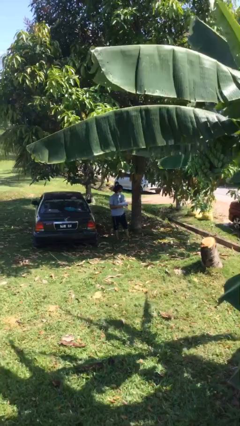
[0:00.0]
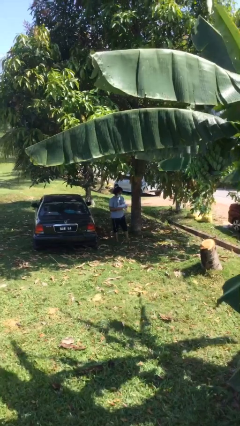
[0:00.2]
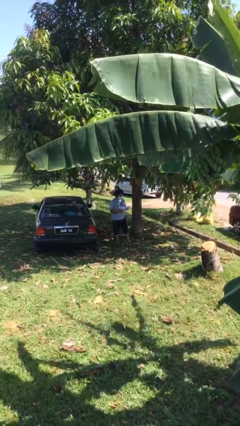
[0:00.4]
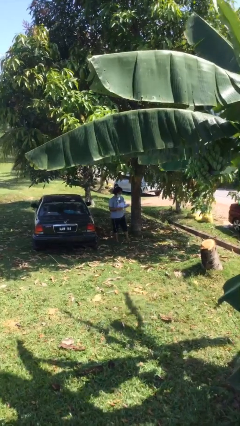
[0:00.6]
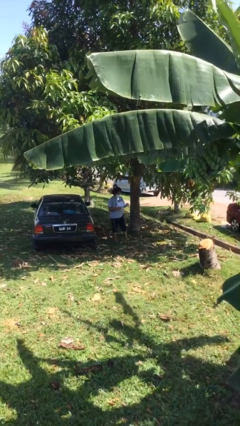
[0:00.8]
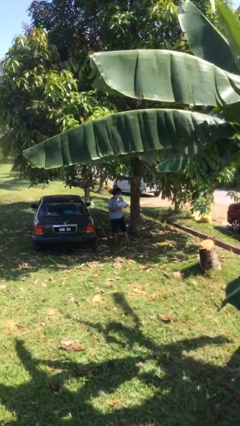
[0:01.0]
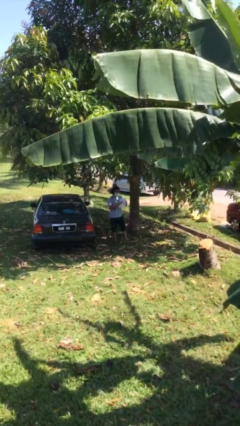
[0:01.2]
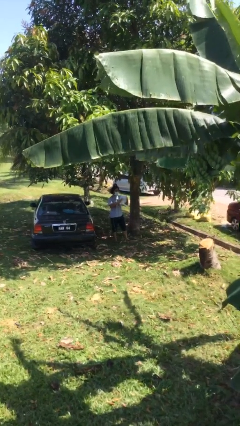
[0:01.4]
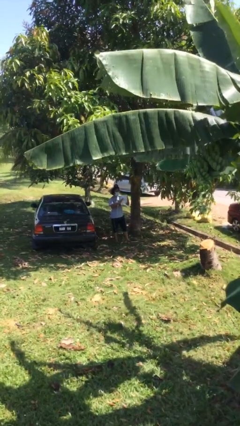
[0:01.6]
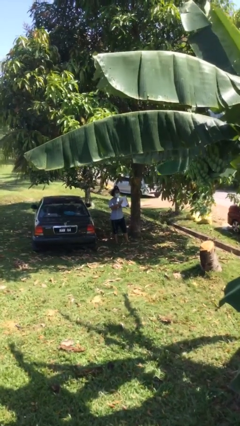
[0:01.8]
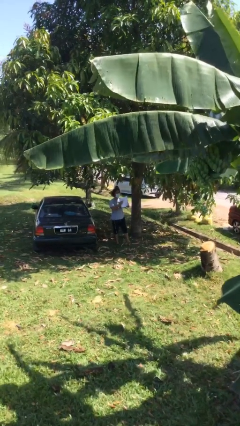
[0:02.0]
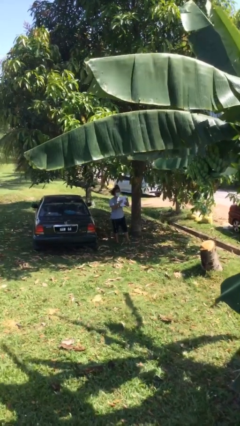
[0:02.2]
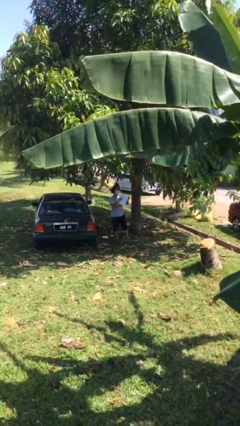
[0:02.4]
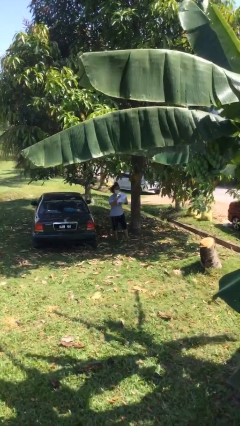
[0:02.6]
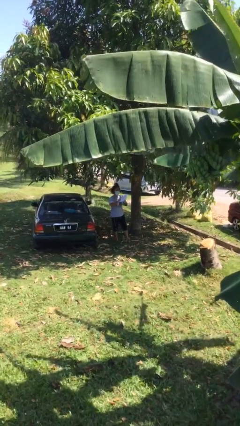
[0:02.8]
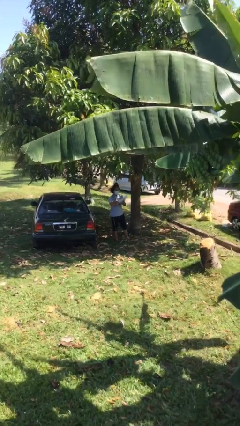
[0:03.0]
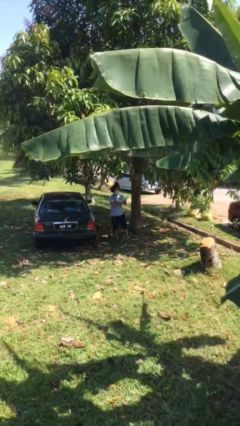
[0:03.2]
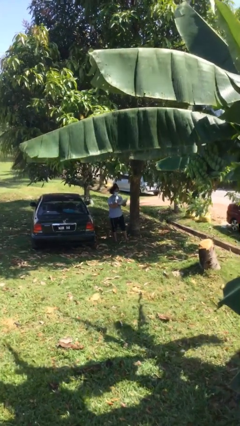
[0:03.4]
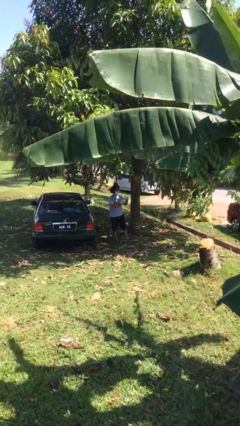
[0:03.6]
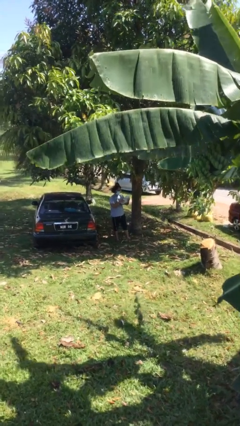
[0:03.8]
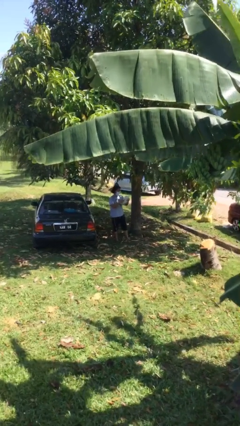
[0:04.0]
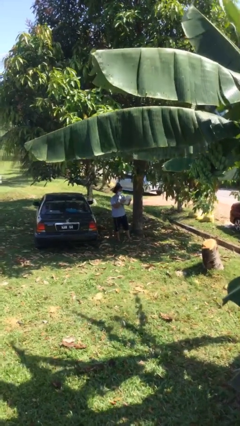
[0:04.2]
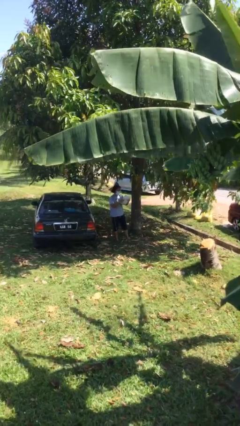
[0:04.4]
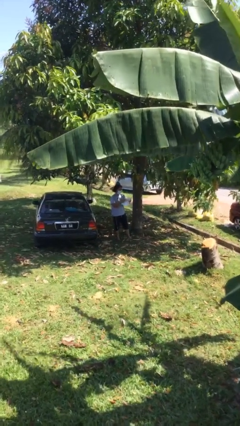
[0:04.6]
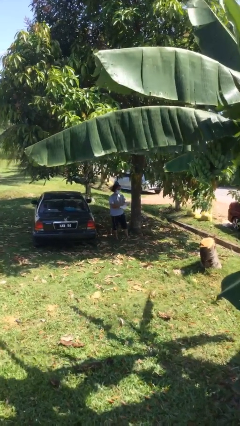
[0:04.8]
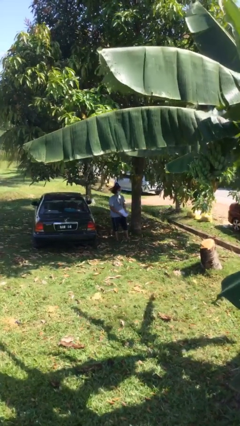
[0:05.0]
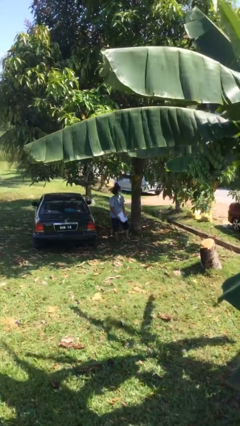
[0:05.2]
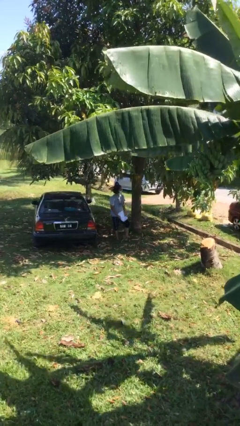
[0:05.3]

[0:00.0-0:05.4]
person reads document

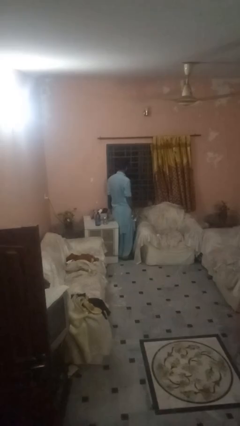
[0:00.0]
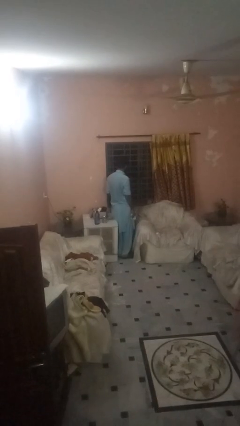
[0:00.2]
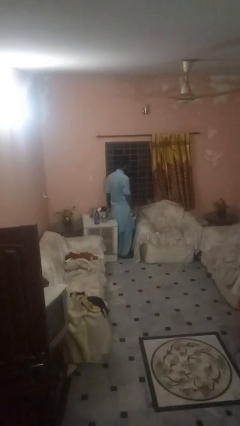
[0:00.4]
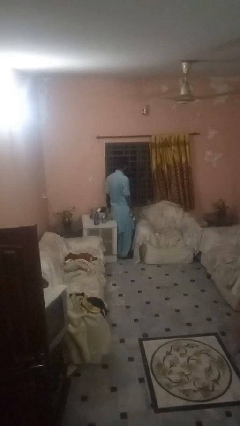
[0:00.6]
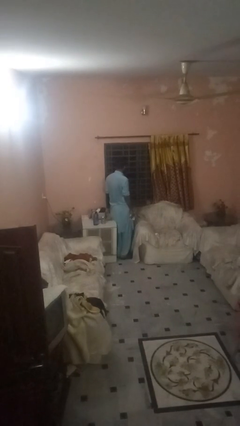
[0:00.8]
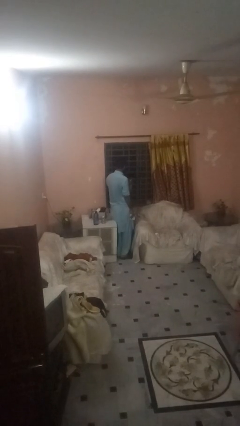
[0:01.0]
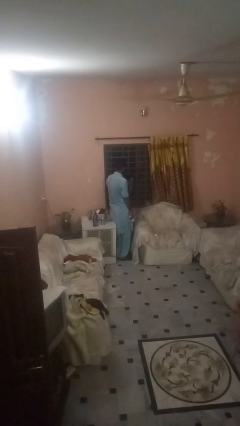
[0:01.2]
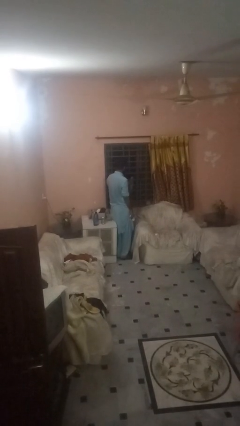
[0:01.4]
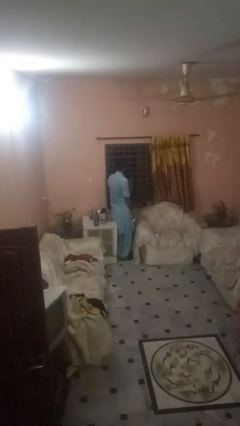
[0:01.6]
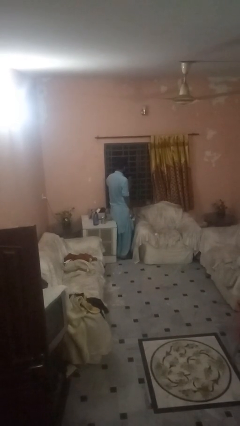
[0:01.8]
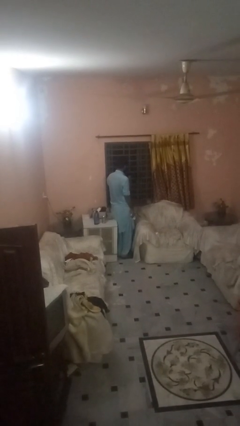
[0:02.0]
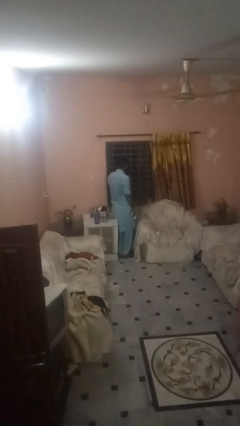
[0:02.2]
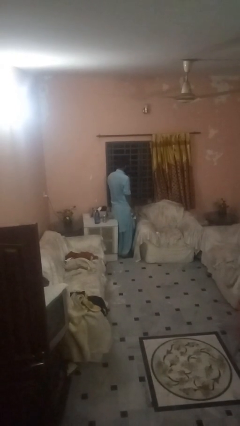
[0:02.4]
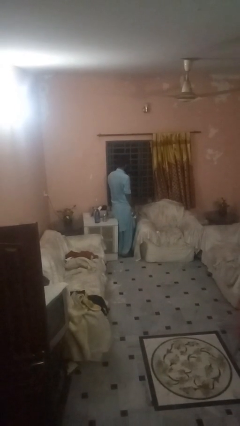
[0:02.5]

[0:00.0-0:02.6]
person sprays from bottle

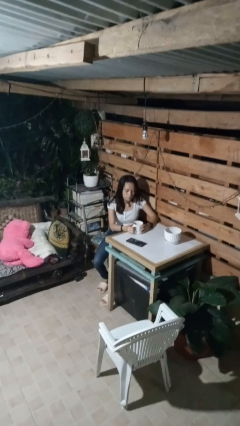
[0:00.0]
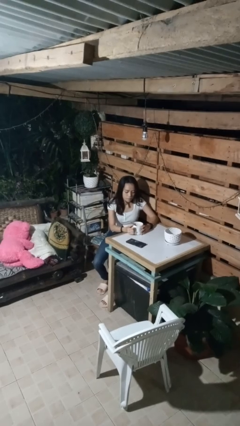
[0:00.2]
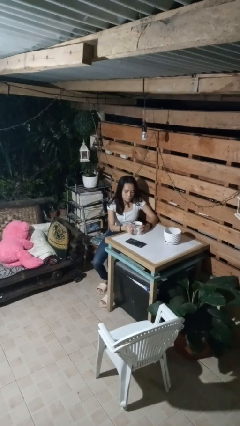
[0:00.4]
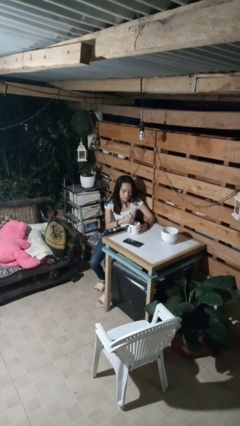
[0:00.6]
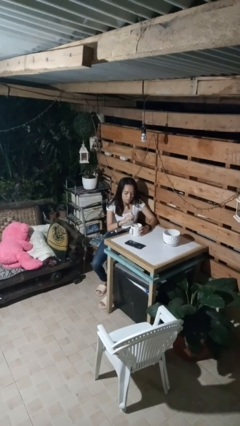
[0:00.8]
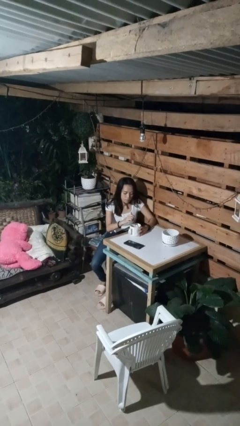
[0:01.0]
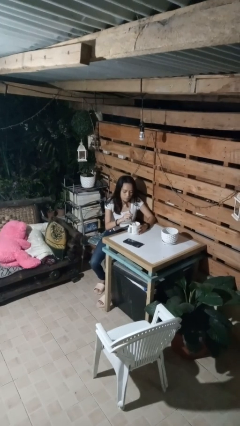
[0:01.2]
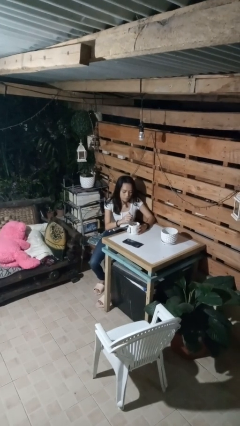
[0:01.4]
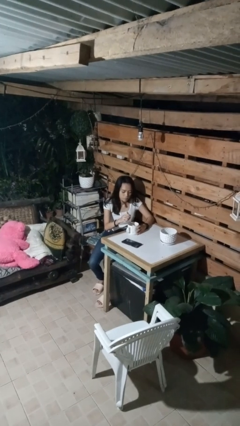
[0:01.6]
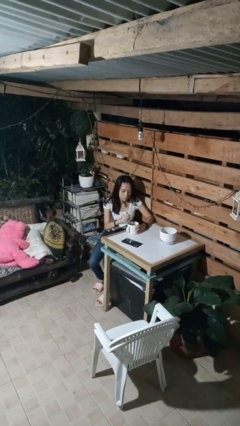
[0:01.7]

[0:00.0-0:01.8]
person stirs mug

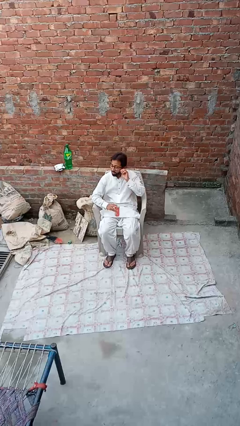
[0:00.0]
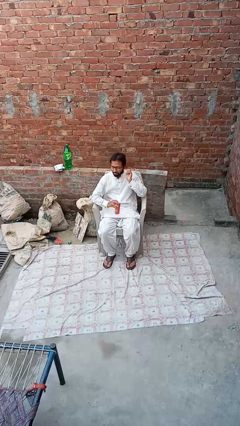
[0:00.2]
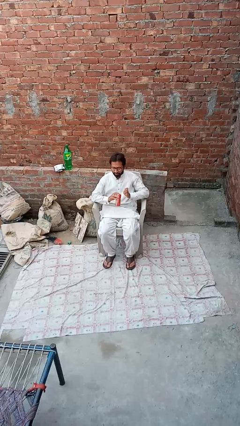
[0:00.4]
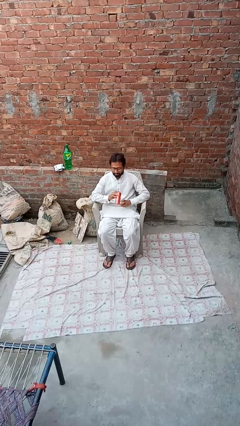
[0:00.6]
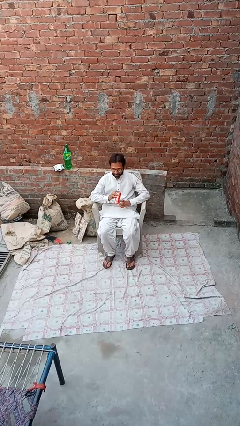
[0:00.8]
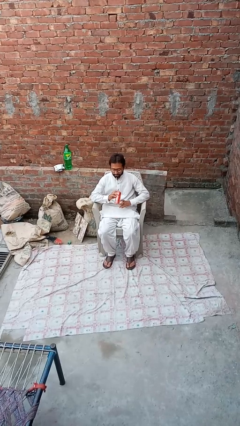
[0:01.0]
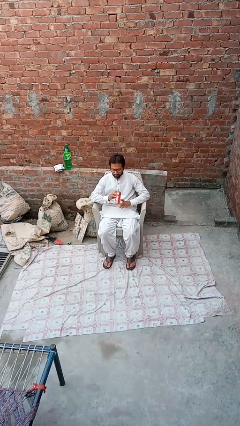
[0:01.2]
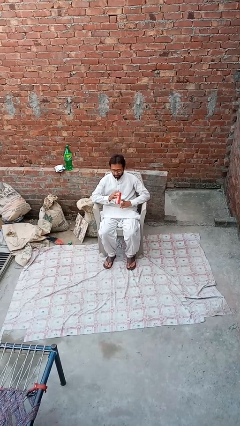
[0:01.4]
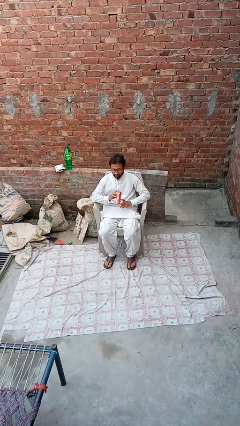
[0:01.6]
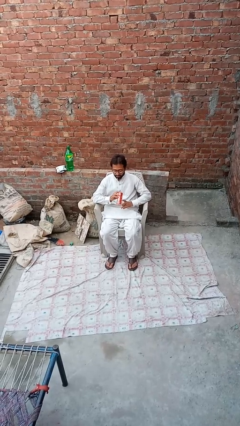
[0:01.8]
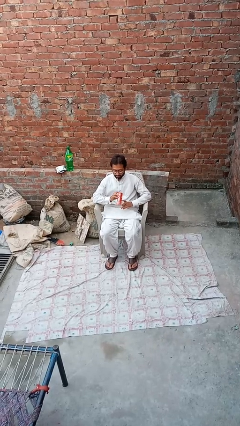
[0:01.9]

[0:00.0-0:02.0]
person drinks from straw

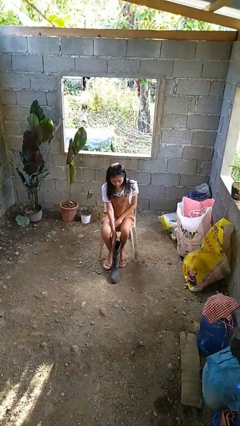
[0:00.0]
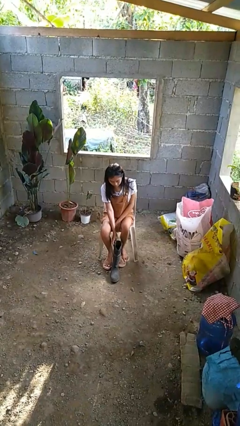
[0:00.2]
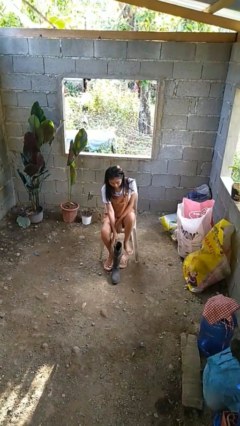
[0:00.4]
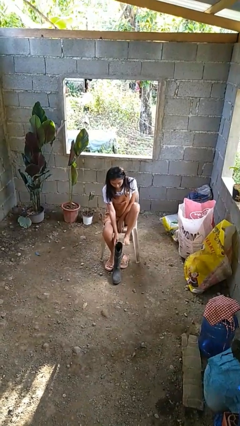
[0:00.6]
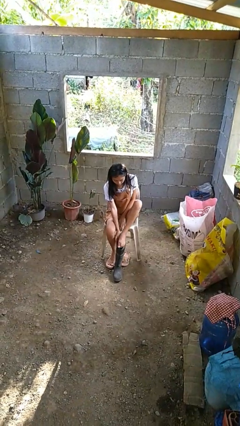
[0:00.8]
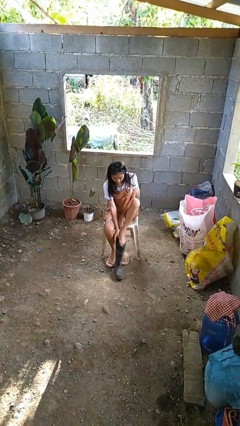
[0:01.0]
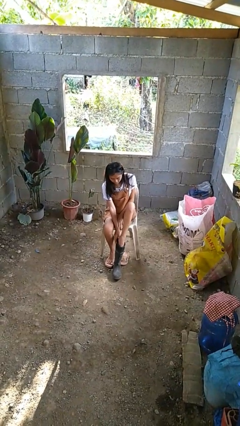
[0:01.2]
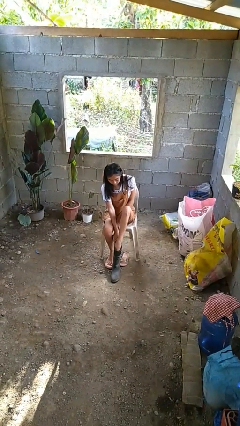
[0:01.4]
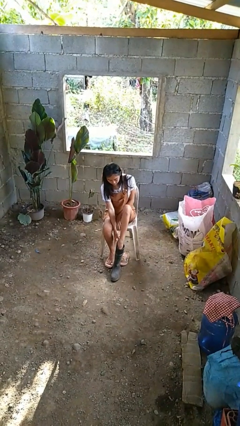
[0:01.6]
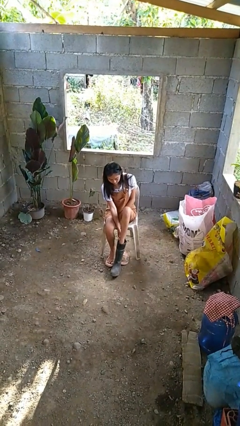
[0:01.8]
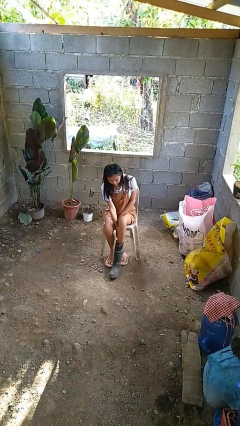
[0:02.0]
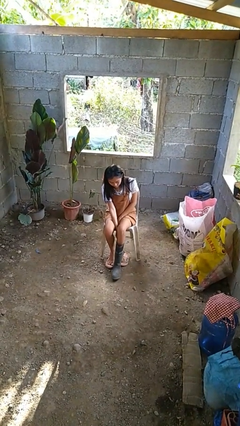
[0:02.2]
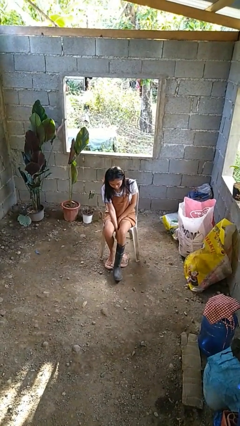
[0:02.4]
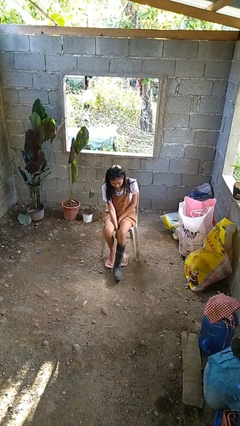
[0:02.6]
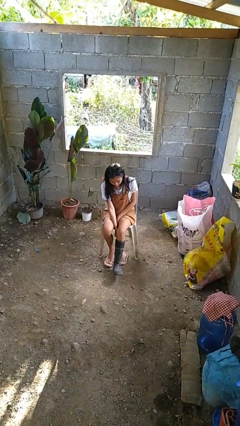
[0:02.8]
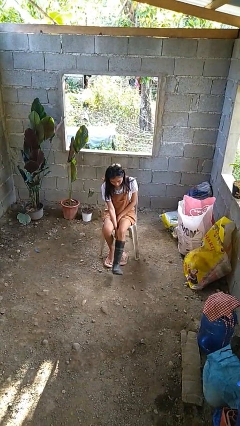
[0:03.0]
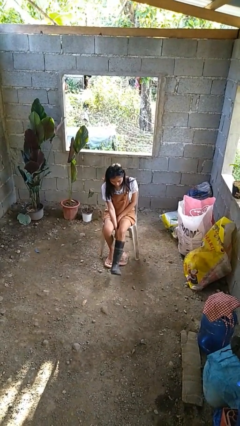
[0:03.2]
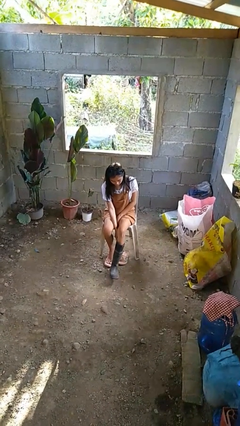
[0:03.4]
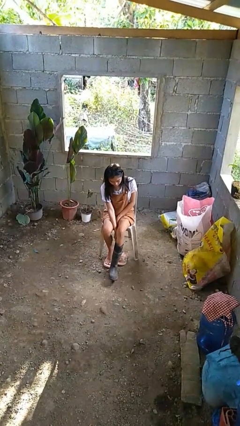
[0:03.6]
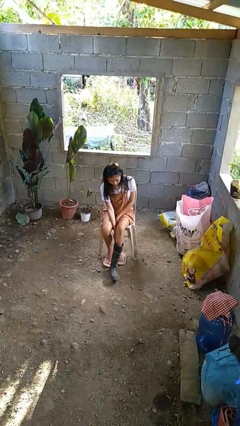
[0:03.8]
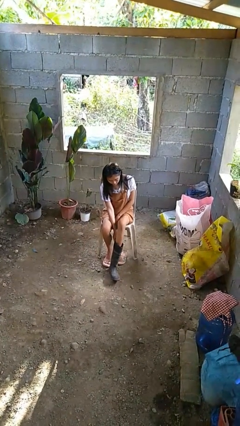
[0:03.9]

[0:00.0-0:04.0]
person puts on boots

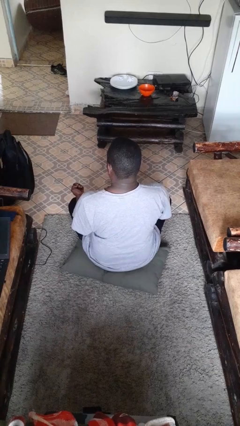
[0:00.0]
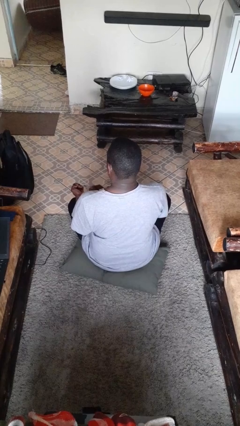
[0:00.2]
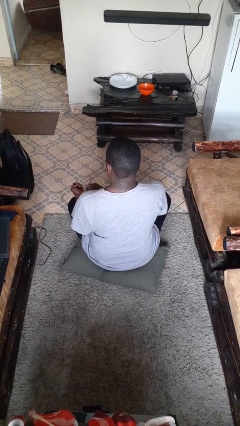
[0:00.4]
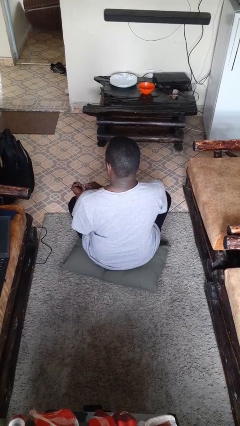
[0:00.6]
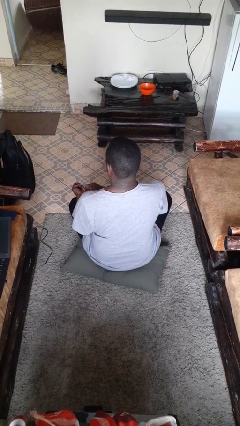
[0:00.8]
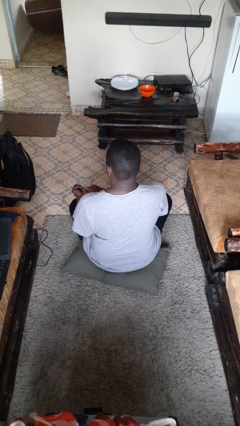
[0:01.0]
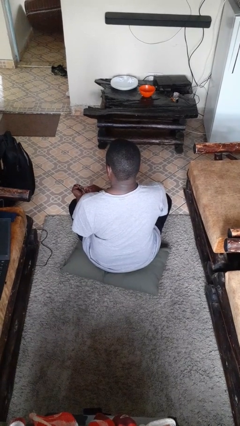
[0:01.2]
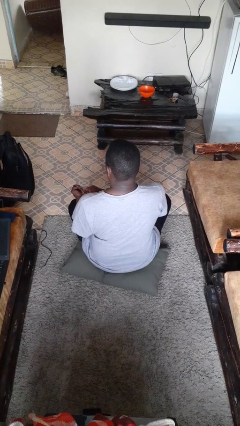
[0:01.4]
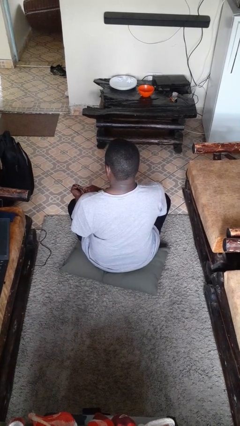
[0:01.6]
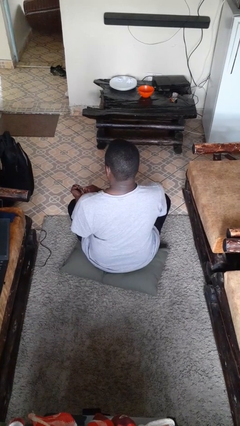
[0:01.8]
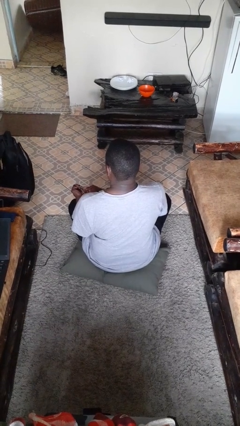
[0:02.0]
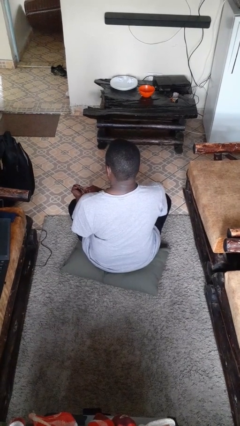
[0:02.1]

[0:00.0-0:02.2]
person clips fingernails
